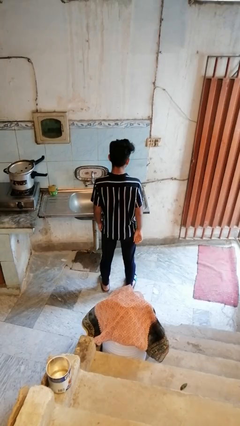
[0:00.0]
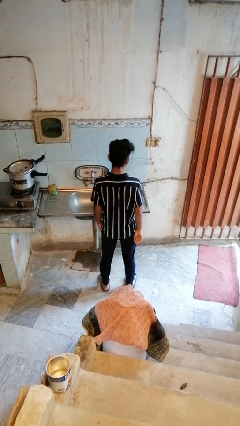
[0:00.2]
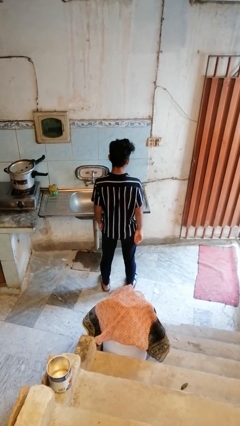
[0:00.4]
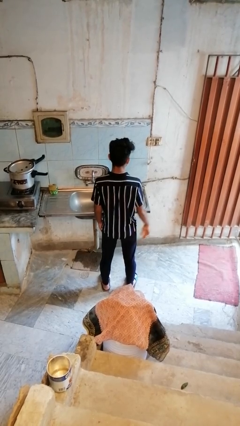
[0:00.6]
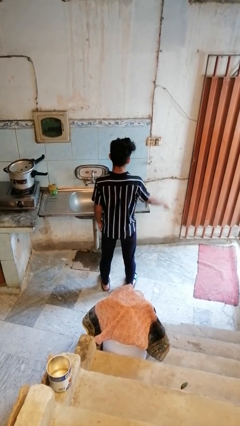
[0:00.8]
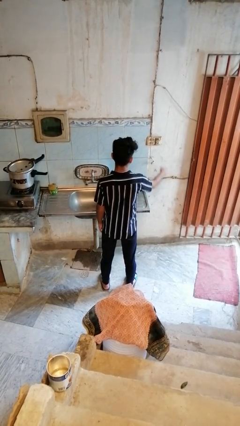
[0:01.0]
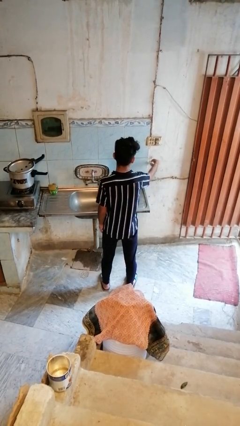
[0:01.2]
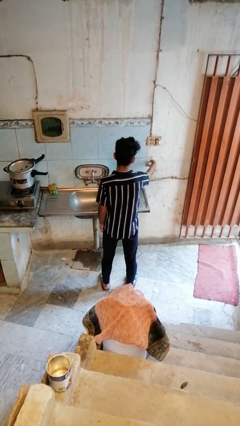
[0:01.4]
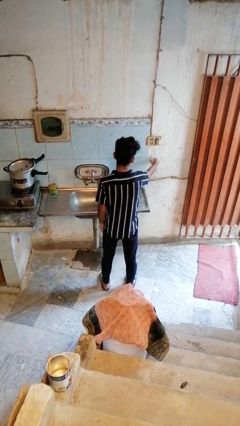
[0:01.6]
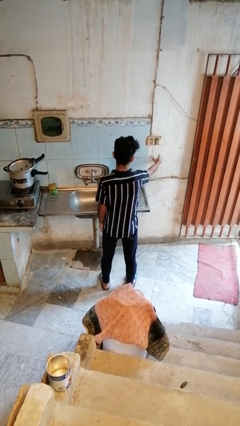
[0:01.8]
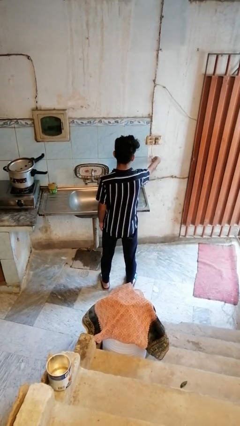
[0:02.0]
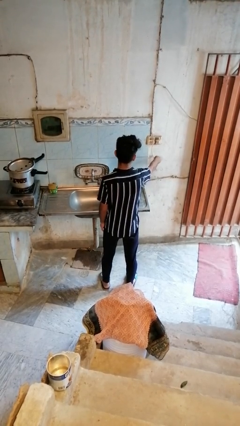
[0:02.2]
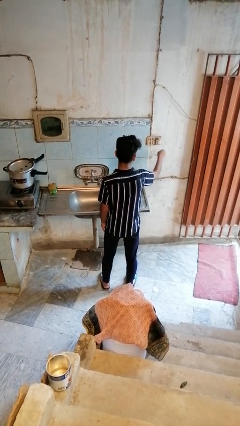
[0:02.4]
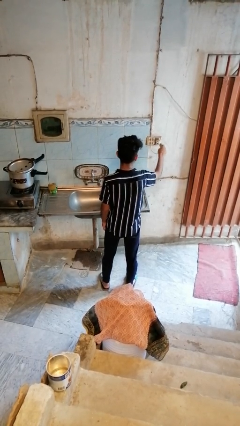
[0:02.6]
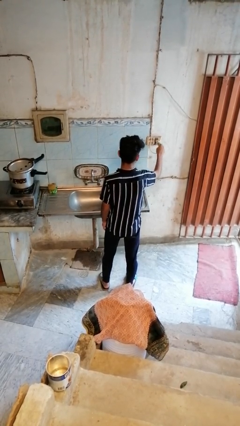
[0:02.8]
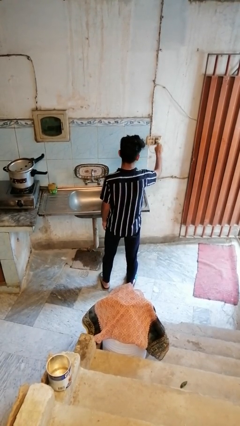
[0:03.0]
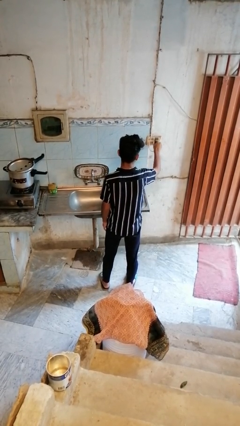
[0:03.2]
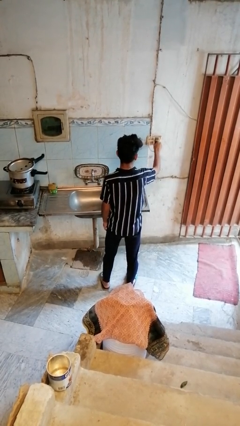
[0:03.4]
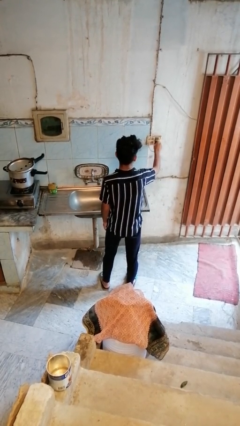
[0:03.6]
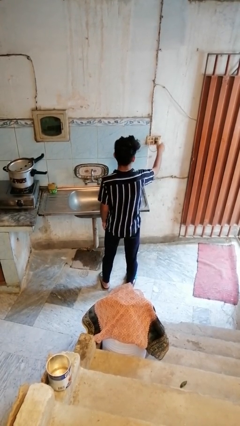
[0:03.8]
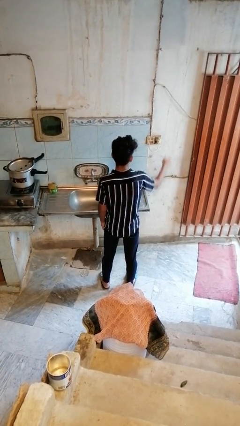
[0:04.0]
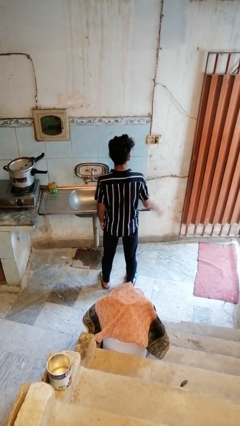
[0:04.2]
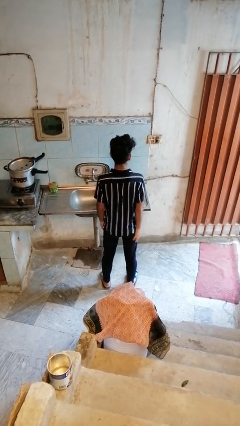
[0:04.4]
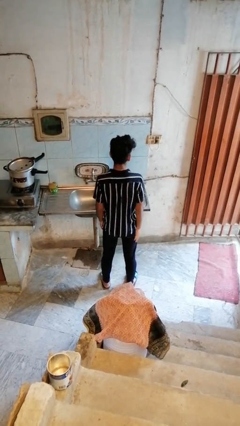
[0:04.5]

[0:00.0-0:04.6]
person plugs into electrical socket

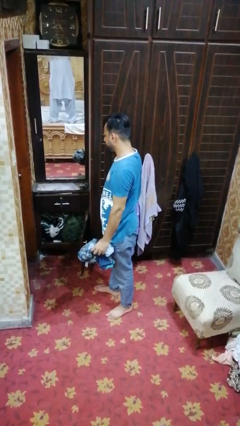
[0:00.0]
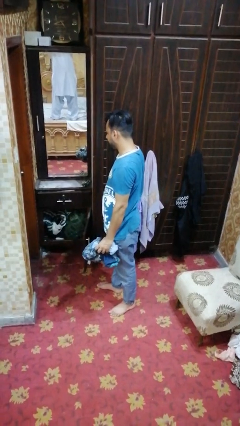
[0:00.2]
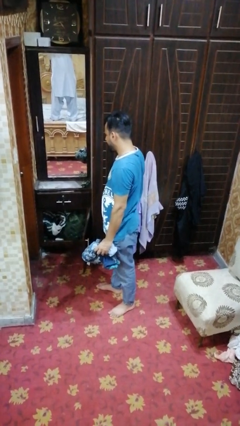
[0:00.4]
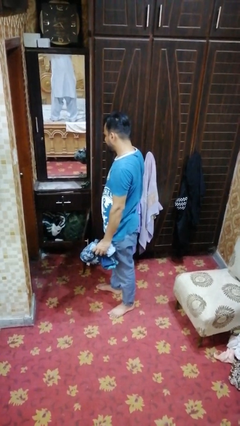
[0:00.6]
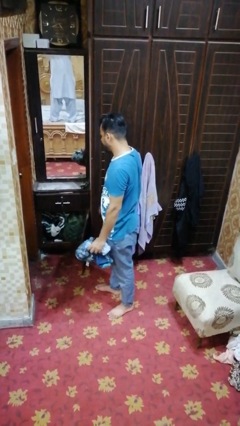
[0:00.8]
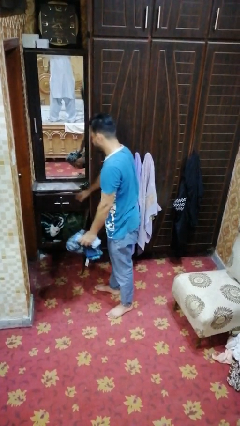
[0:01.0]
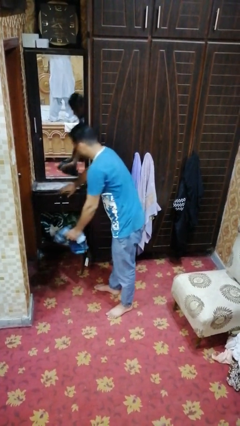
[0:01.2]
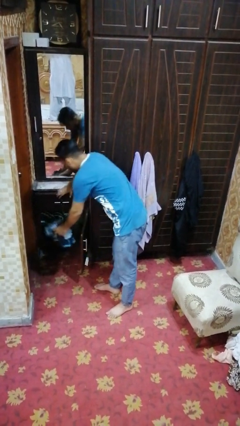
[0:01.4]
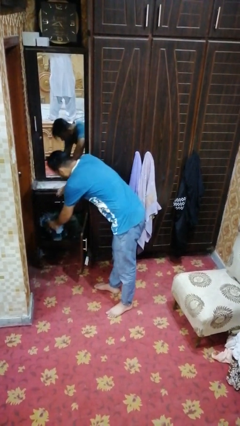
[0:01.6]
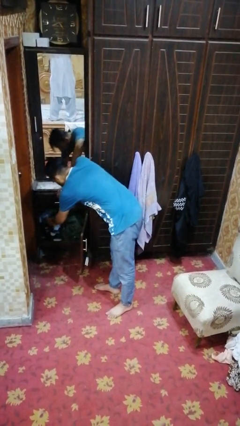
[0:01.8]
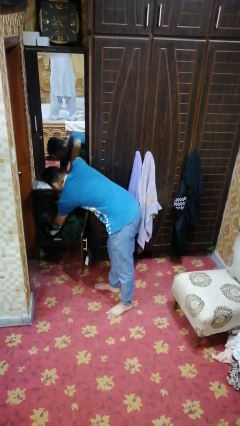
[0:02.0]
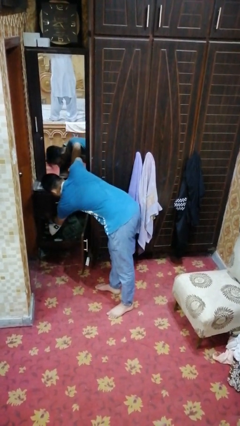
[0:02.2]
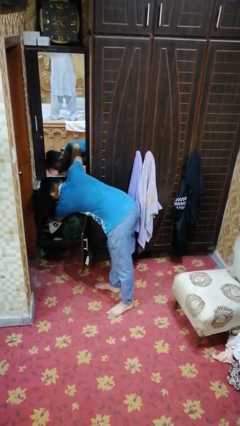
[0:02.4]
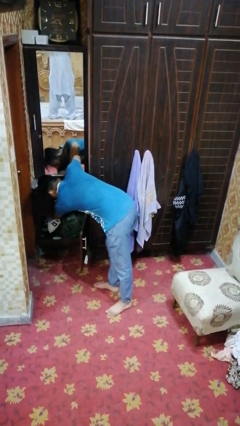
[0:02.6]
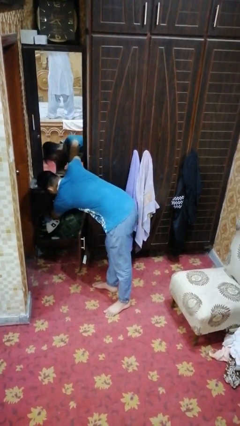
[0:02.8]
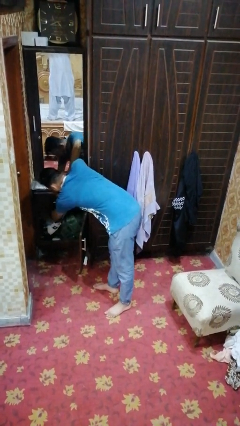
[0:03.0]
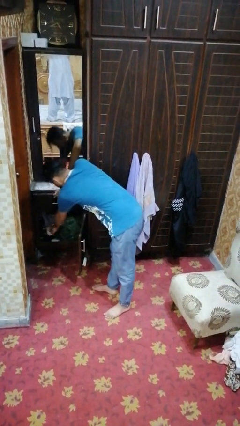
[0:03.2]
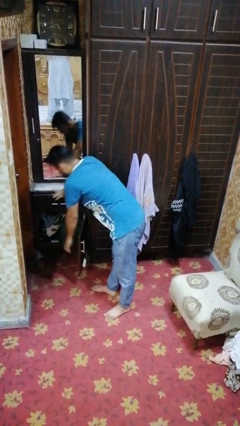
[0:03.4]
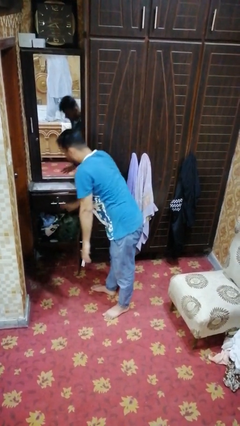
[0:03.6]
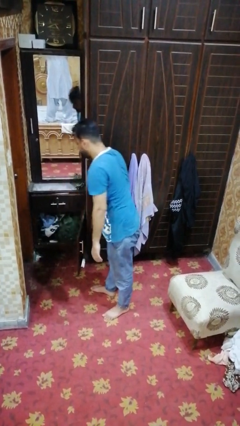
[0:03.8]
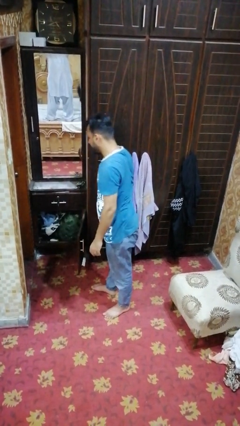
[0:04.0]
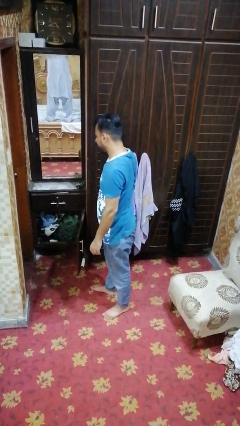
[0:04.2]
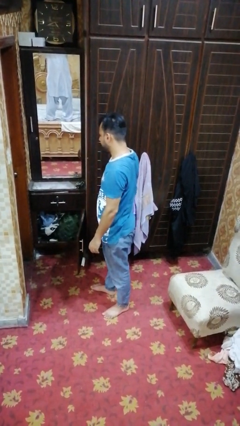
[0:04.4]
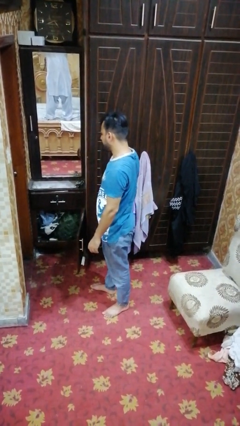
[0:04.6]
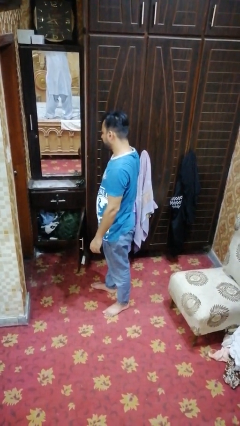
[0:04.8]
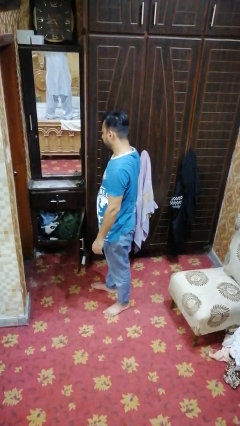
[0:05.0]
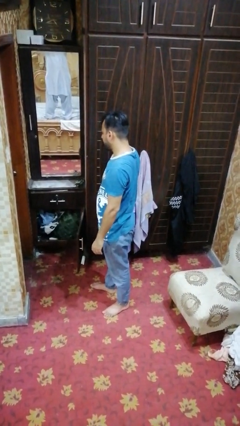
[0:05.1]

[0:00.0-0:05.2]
person puts clothes into dresser

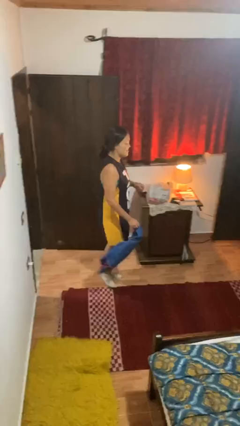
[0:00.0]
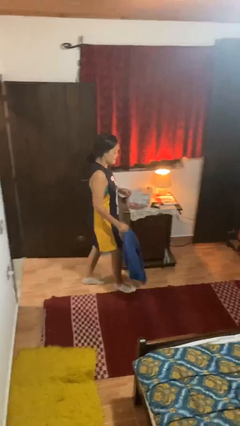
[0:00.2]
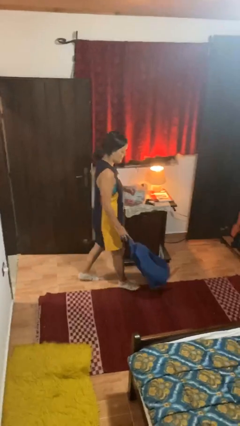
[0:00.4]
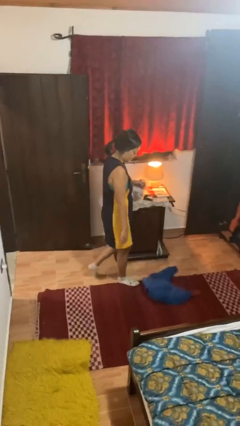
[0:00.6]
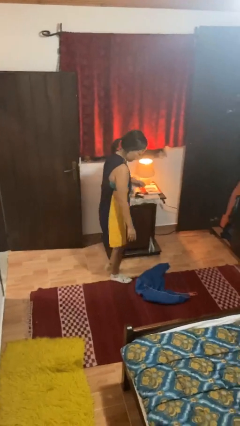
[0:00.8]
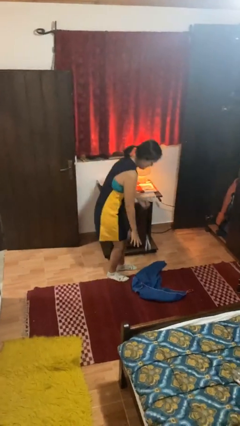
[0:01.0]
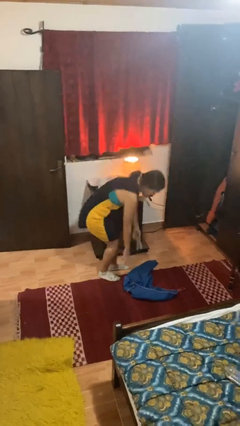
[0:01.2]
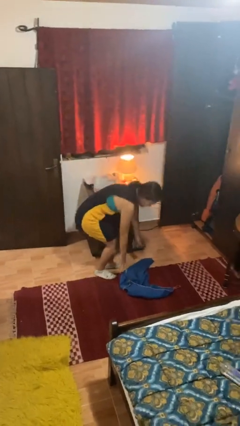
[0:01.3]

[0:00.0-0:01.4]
person drops object

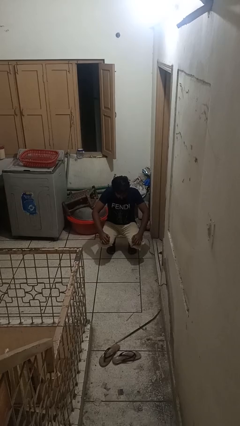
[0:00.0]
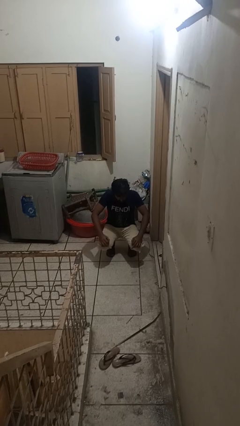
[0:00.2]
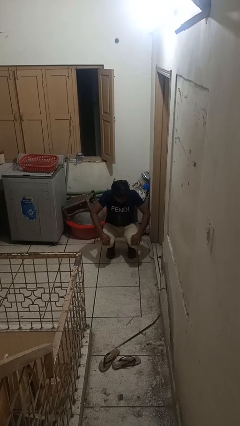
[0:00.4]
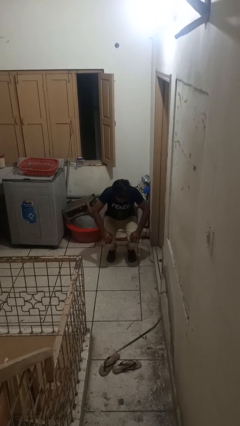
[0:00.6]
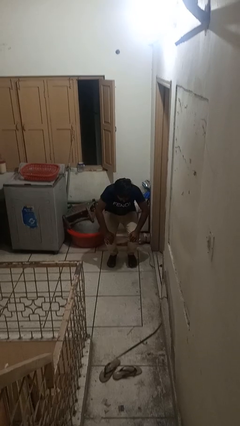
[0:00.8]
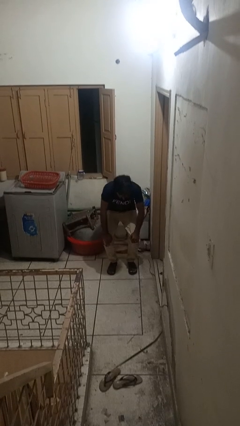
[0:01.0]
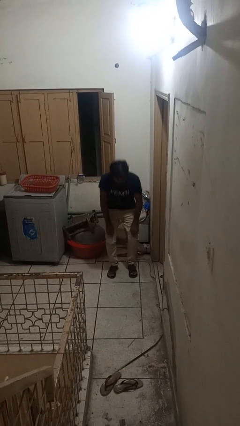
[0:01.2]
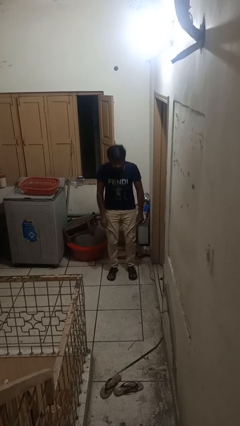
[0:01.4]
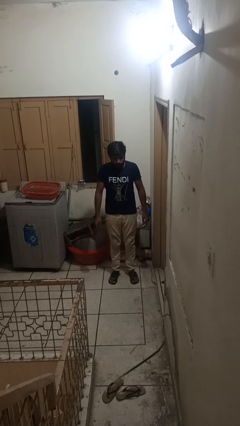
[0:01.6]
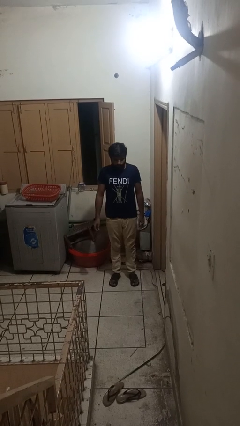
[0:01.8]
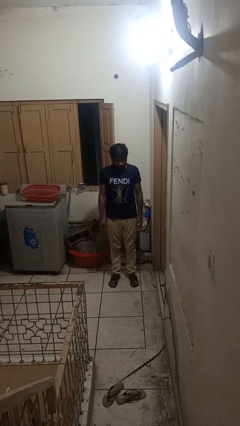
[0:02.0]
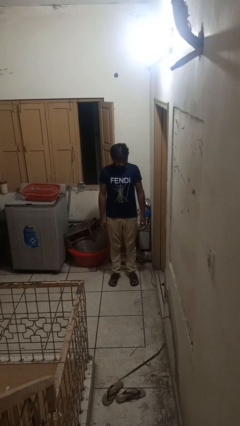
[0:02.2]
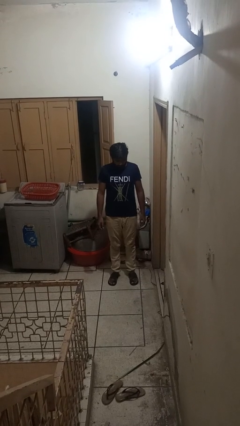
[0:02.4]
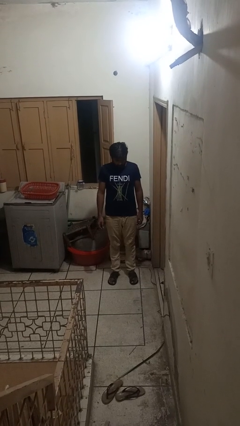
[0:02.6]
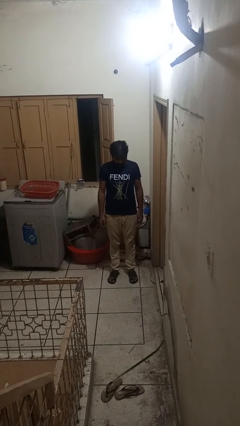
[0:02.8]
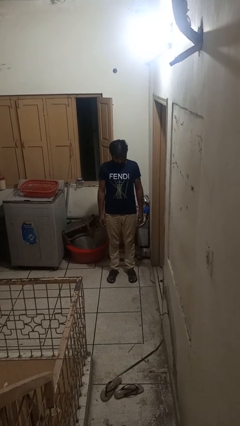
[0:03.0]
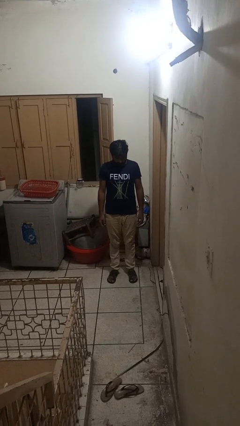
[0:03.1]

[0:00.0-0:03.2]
person stands up

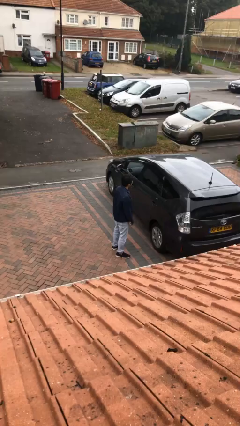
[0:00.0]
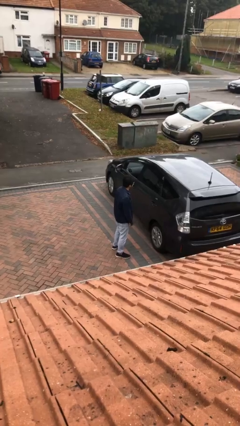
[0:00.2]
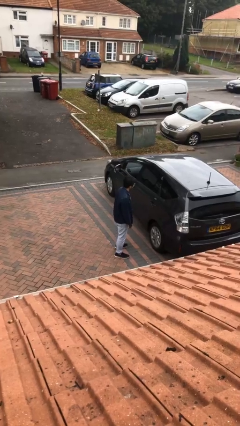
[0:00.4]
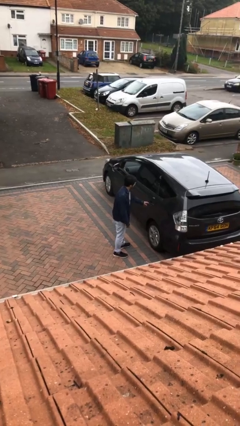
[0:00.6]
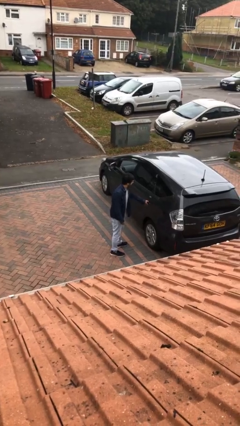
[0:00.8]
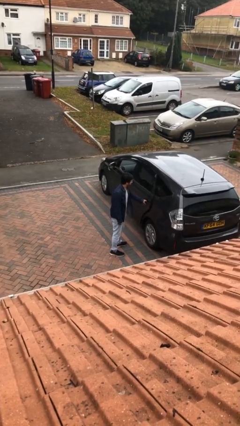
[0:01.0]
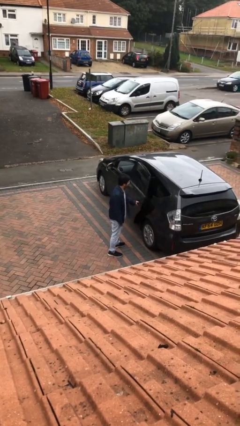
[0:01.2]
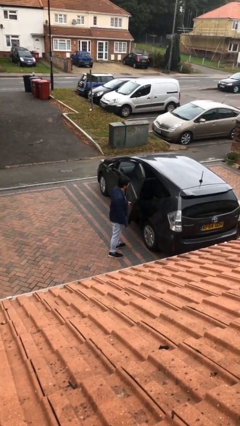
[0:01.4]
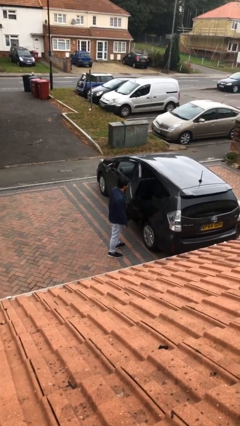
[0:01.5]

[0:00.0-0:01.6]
person opens car door

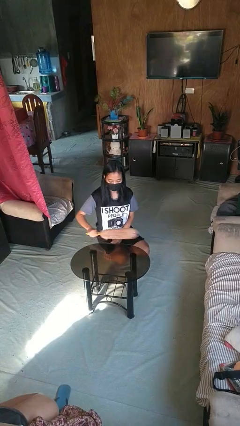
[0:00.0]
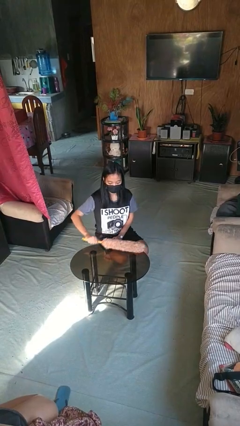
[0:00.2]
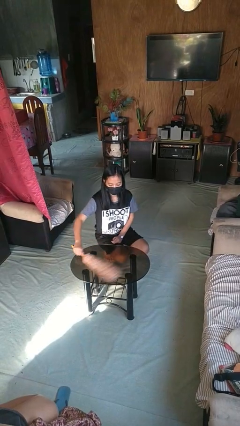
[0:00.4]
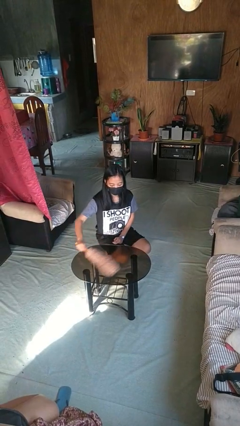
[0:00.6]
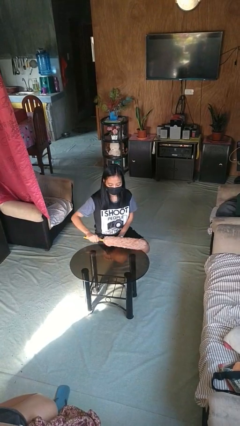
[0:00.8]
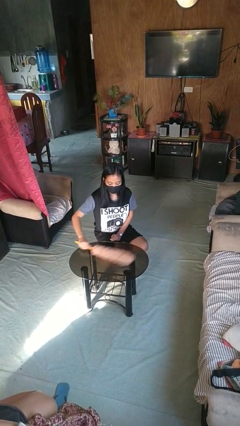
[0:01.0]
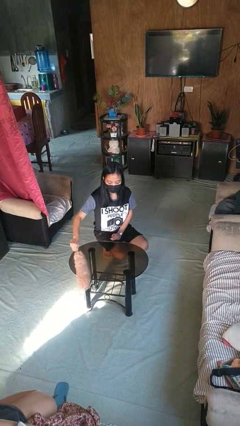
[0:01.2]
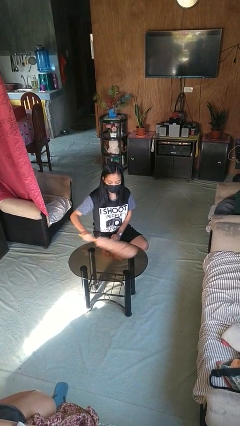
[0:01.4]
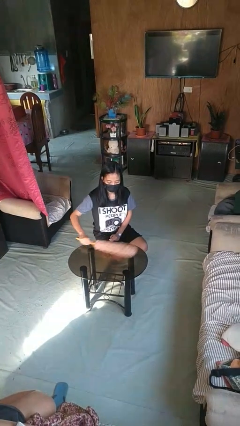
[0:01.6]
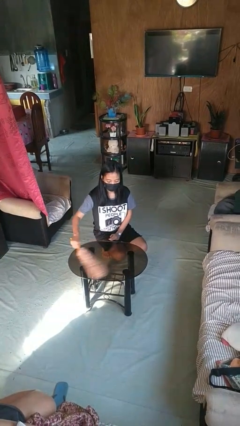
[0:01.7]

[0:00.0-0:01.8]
person dusts furniture
